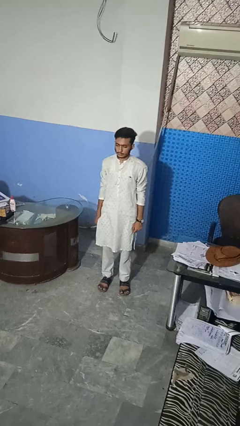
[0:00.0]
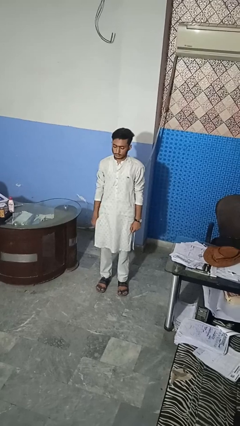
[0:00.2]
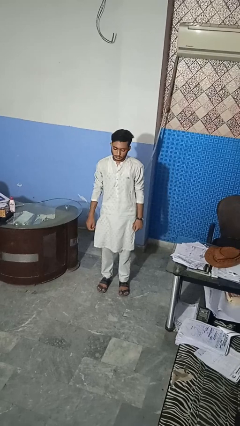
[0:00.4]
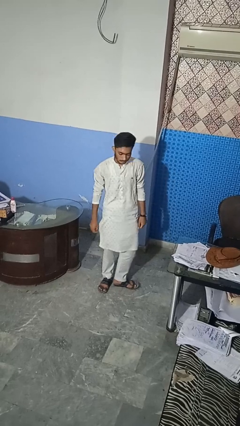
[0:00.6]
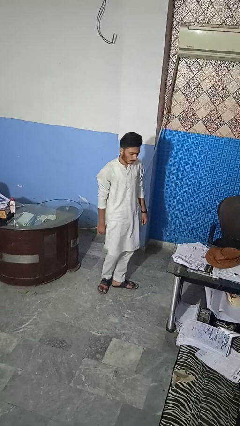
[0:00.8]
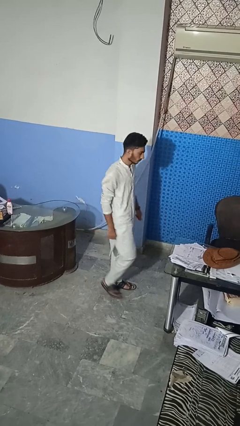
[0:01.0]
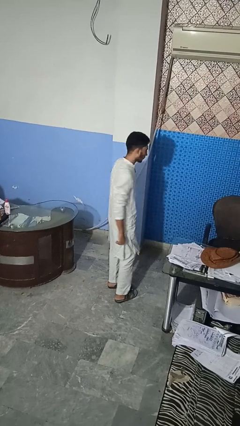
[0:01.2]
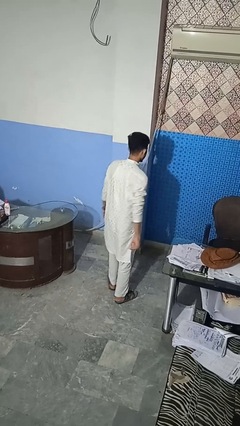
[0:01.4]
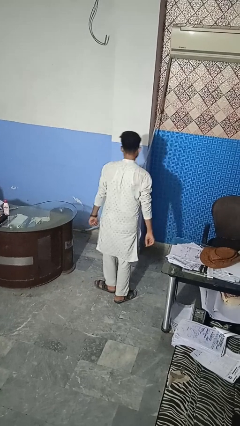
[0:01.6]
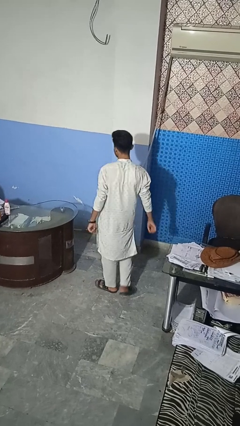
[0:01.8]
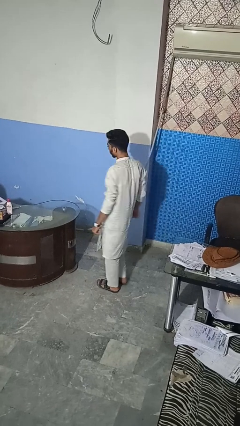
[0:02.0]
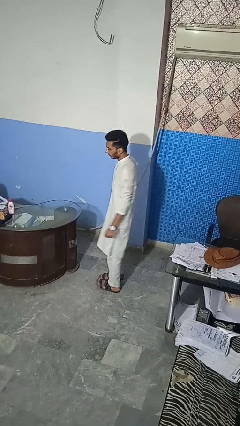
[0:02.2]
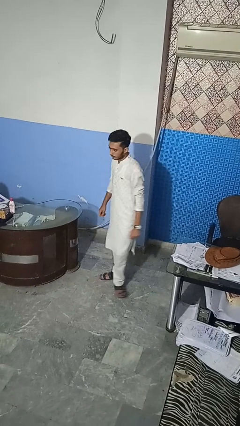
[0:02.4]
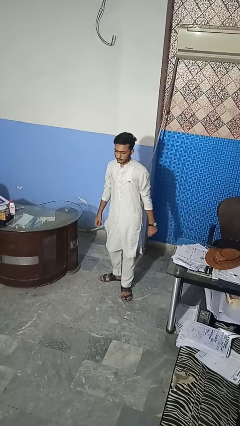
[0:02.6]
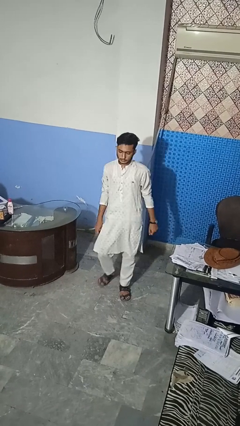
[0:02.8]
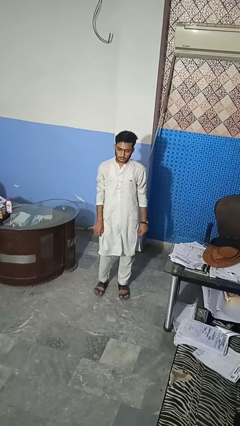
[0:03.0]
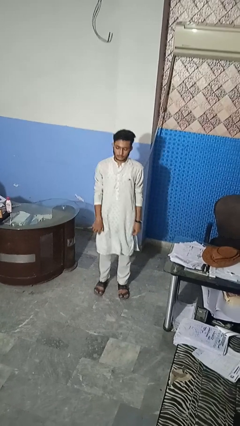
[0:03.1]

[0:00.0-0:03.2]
person twirls

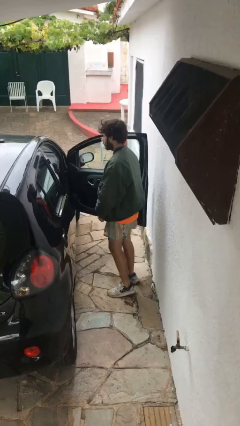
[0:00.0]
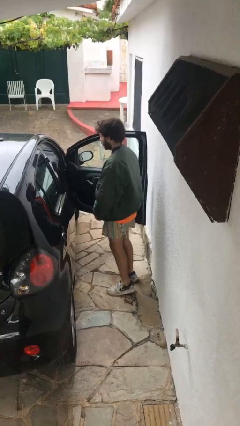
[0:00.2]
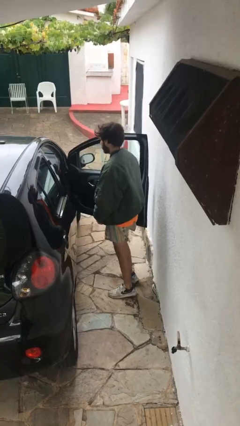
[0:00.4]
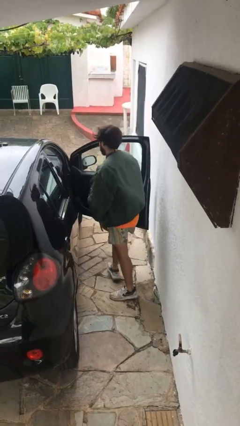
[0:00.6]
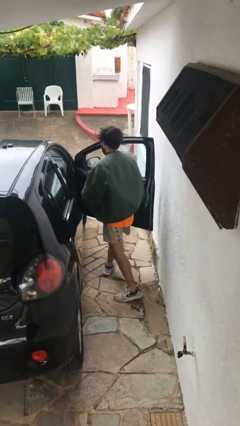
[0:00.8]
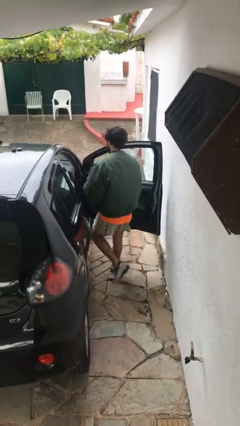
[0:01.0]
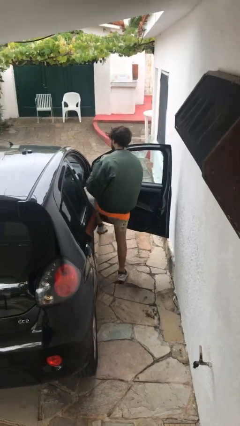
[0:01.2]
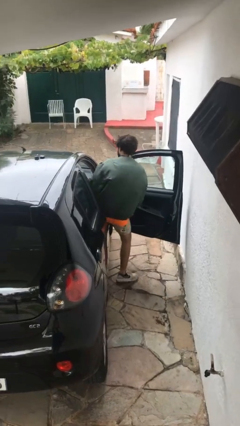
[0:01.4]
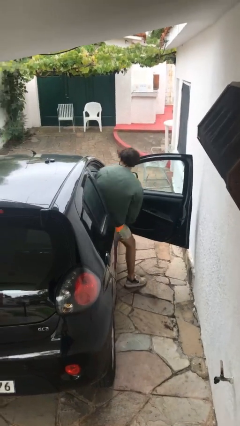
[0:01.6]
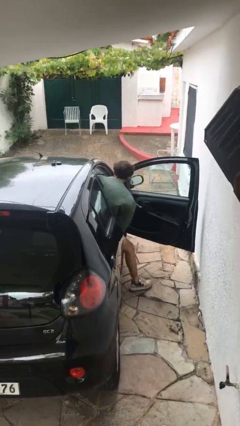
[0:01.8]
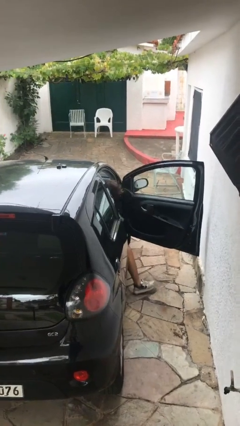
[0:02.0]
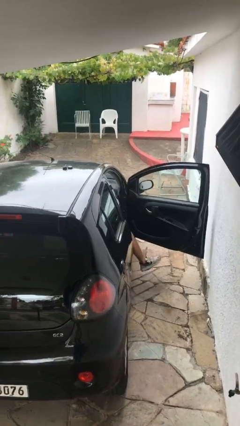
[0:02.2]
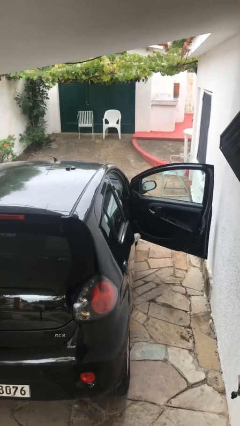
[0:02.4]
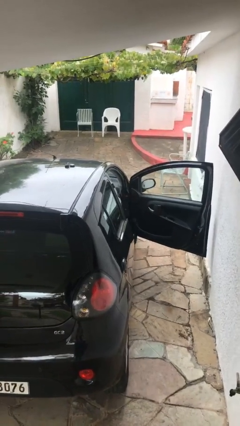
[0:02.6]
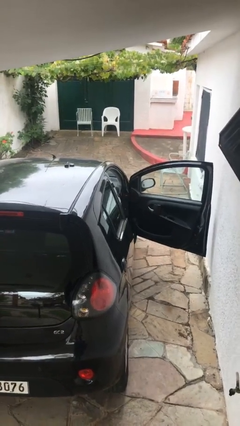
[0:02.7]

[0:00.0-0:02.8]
person enters car

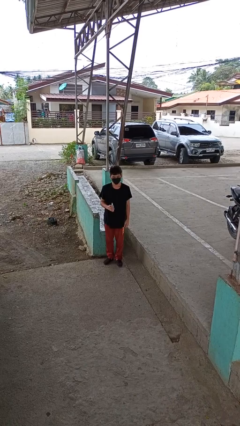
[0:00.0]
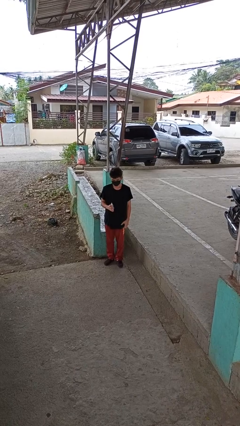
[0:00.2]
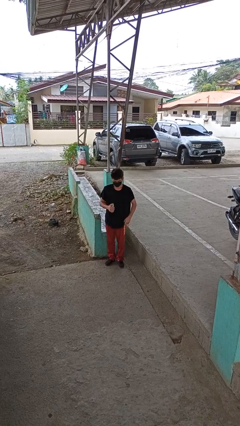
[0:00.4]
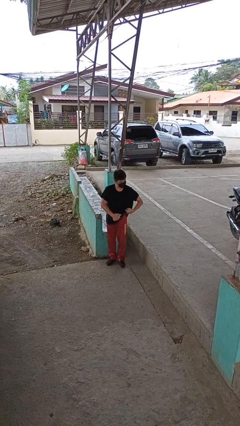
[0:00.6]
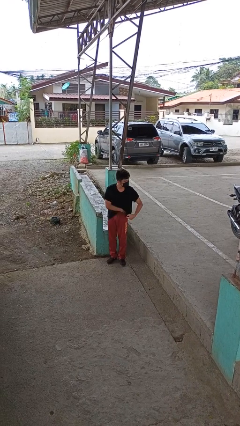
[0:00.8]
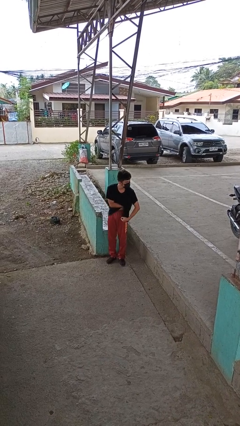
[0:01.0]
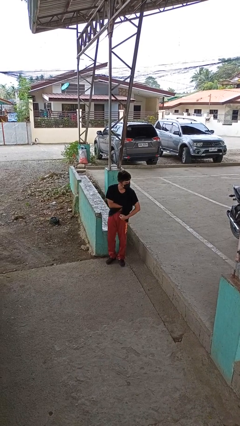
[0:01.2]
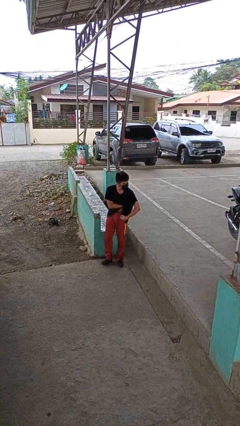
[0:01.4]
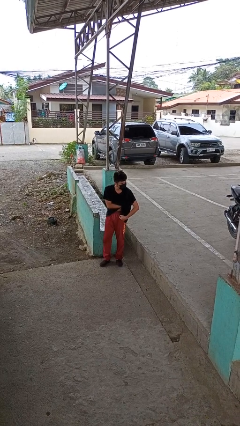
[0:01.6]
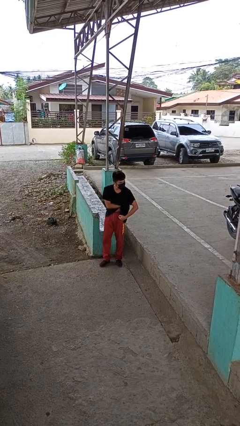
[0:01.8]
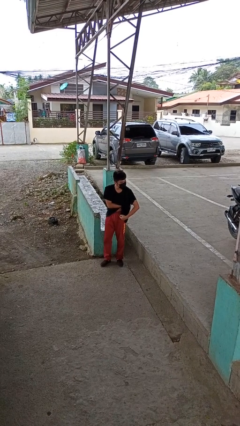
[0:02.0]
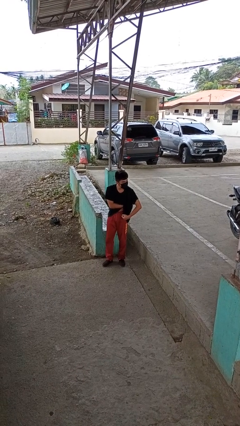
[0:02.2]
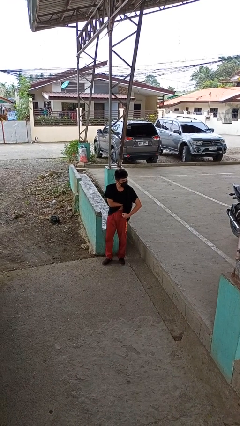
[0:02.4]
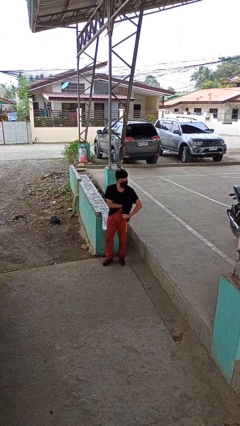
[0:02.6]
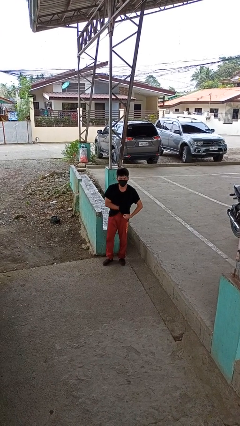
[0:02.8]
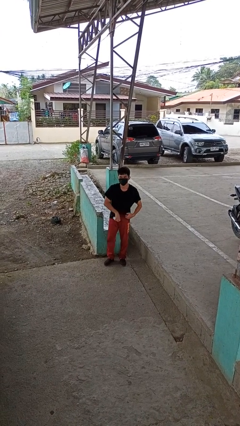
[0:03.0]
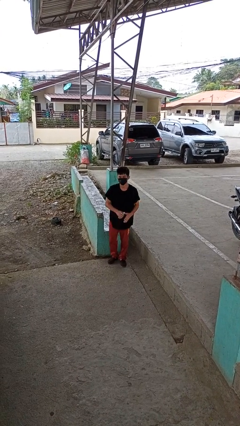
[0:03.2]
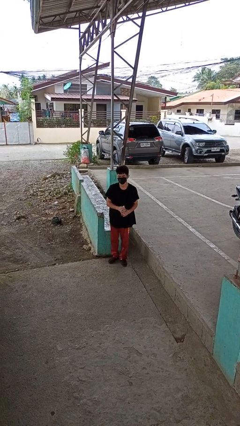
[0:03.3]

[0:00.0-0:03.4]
person applies deodorant

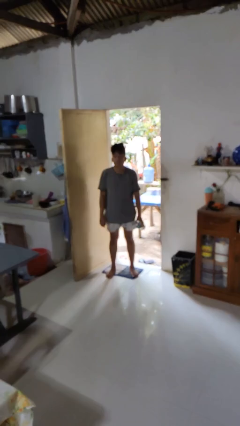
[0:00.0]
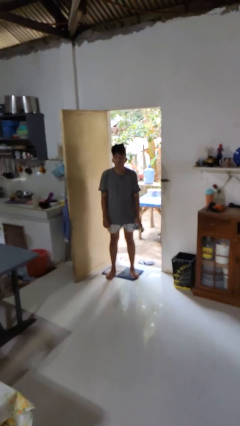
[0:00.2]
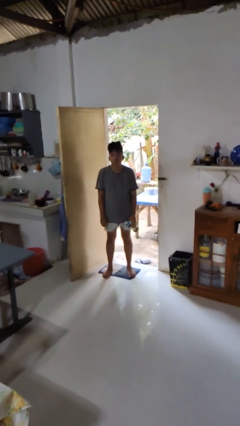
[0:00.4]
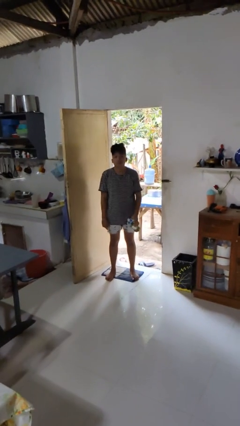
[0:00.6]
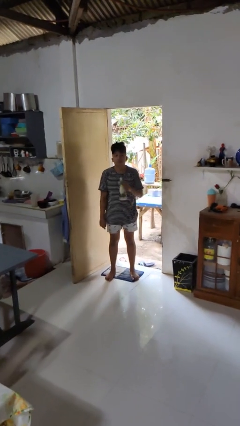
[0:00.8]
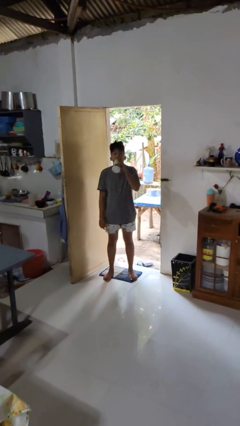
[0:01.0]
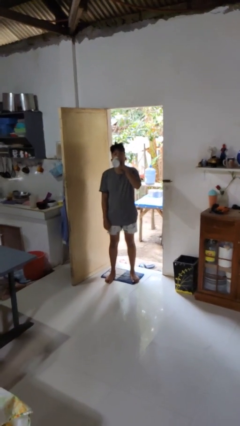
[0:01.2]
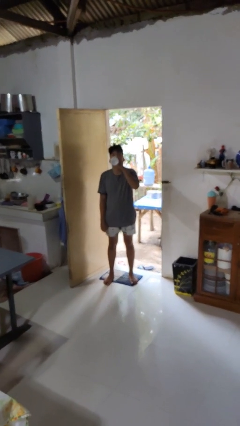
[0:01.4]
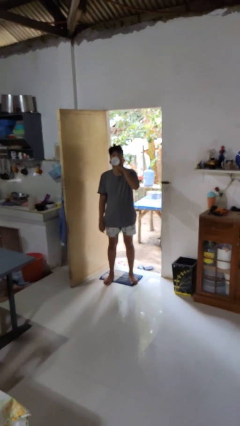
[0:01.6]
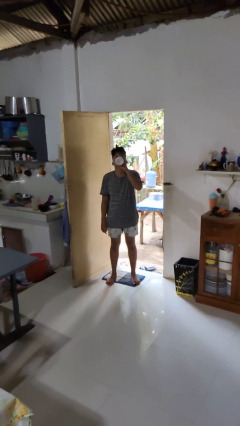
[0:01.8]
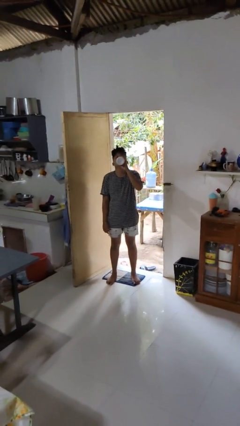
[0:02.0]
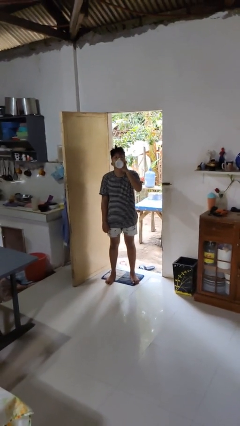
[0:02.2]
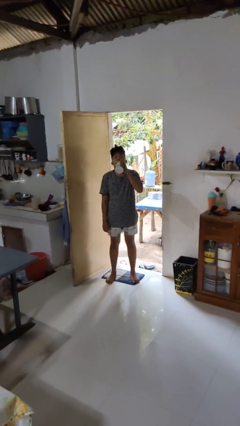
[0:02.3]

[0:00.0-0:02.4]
person drinks from bottle

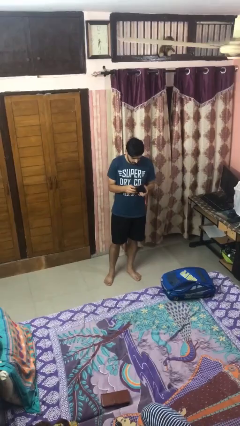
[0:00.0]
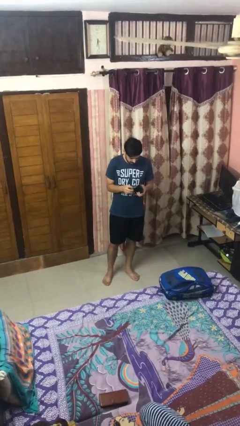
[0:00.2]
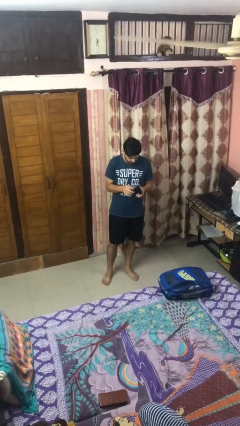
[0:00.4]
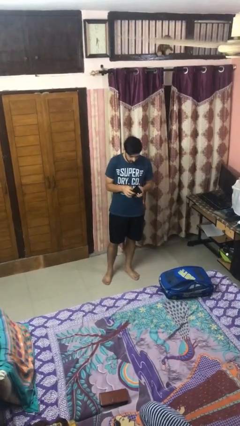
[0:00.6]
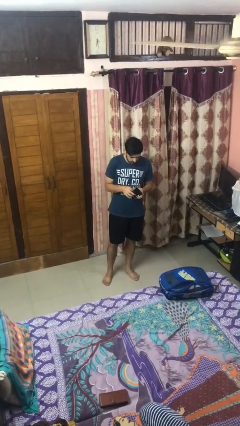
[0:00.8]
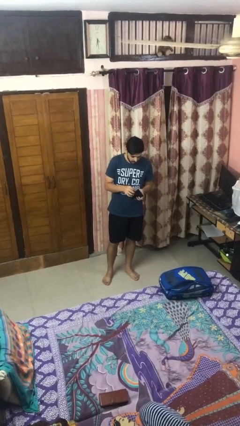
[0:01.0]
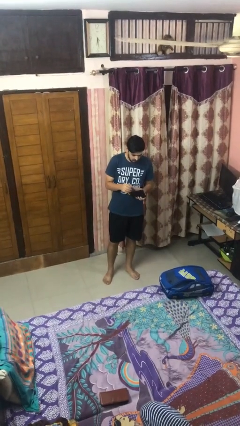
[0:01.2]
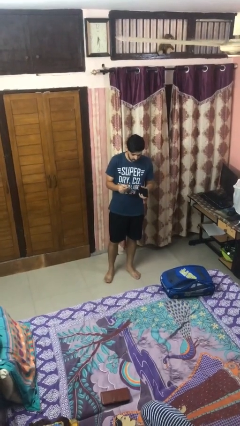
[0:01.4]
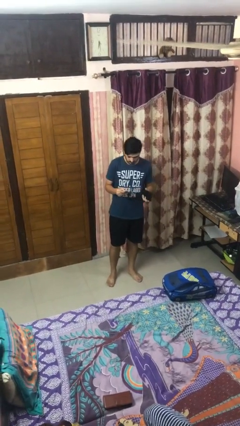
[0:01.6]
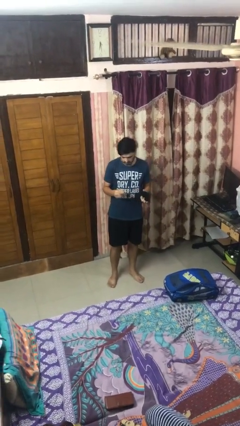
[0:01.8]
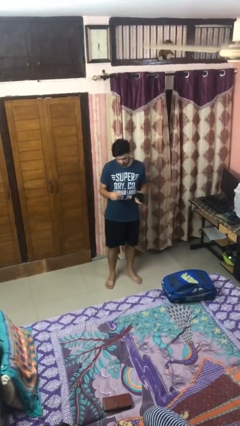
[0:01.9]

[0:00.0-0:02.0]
person takes object from purse

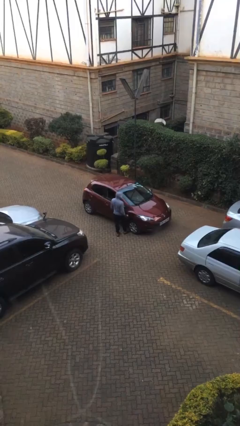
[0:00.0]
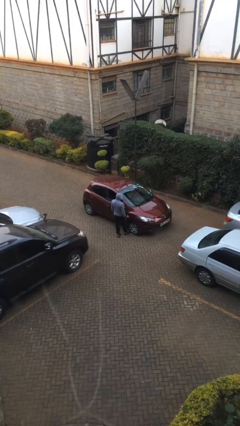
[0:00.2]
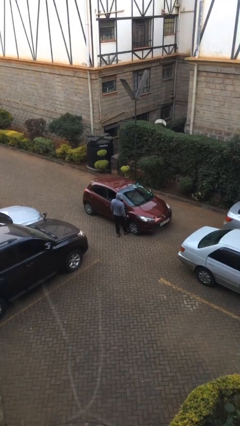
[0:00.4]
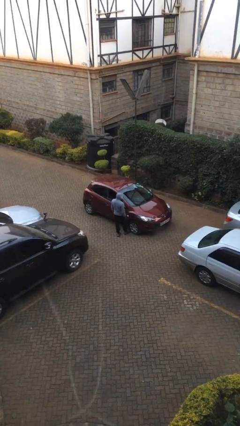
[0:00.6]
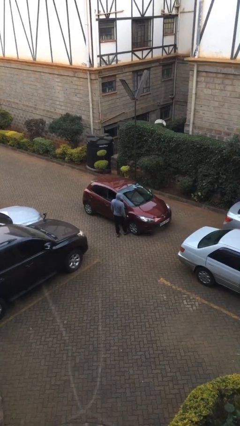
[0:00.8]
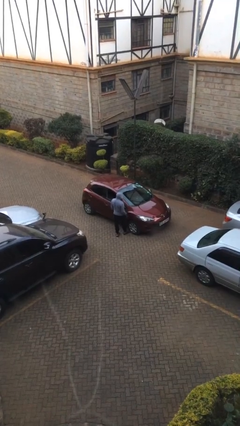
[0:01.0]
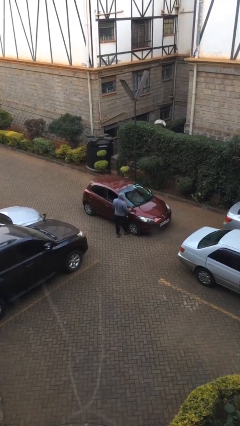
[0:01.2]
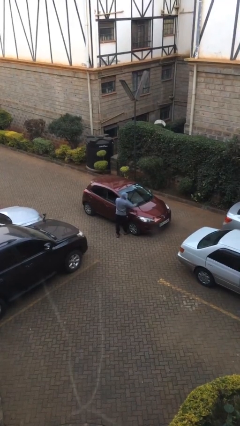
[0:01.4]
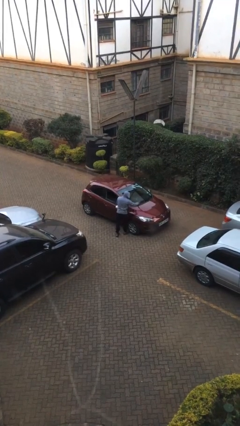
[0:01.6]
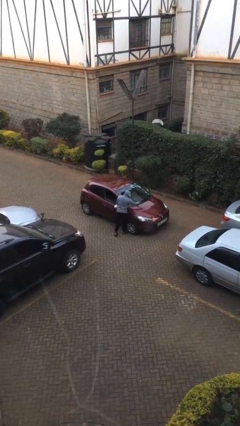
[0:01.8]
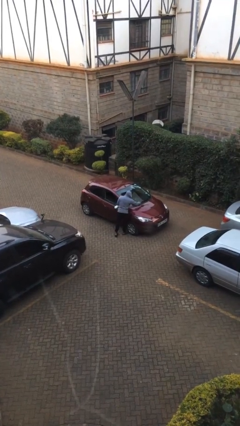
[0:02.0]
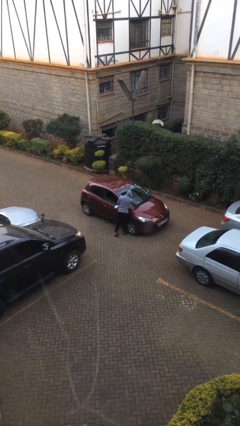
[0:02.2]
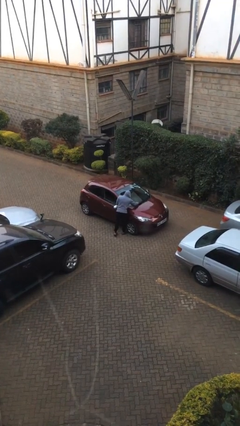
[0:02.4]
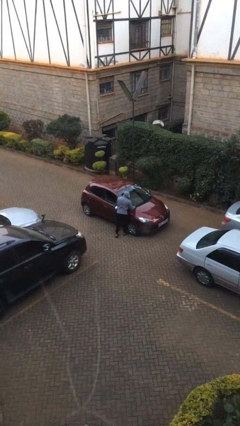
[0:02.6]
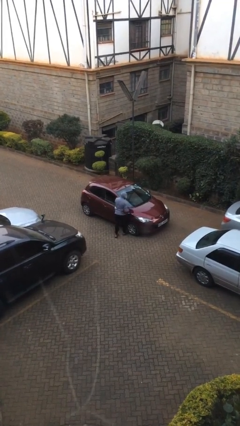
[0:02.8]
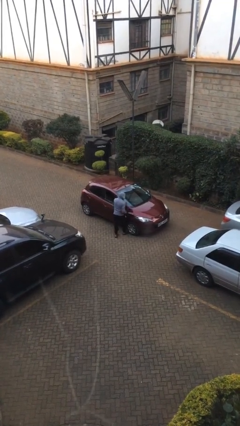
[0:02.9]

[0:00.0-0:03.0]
person flips down car wipers

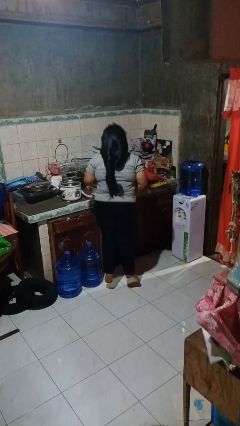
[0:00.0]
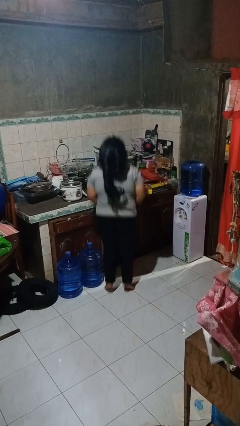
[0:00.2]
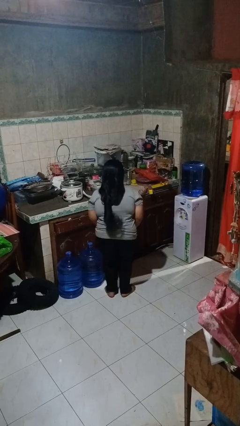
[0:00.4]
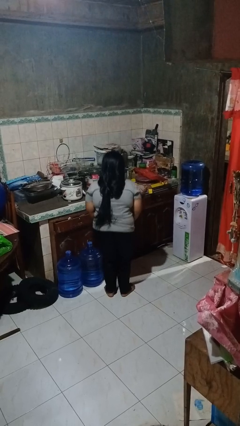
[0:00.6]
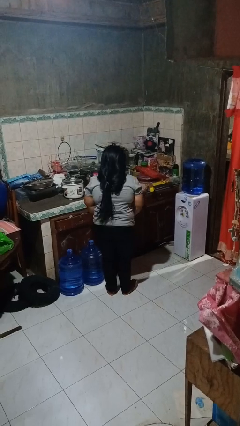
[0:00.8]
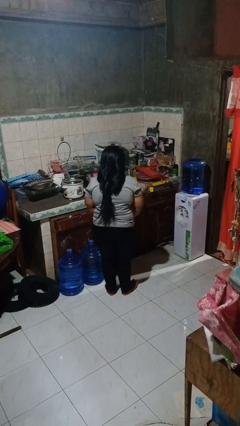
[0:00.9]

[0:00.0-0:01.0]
person jumps
